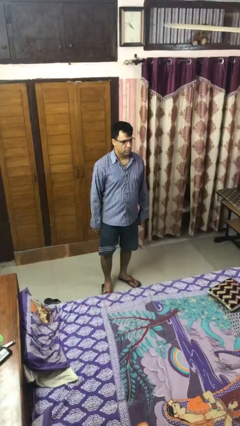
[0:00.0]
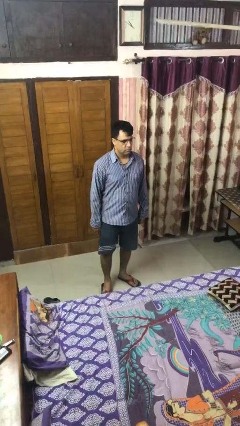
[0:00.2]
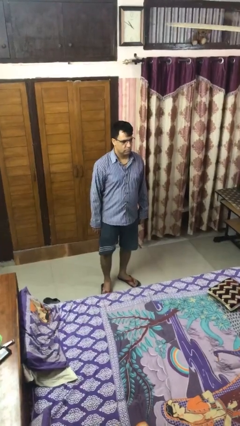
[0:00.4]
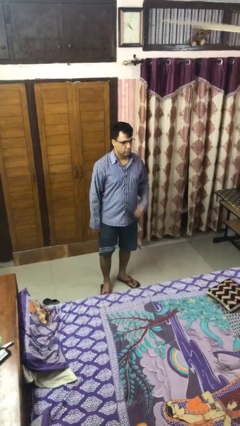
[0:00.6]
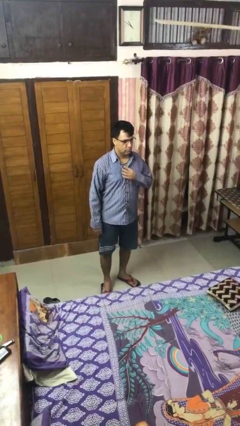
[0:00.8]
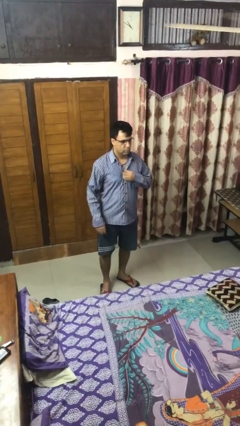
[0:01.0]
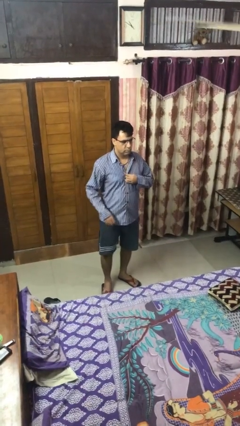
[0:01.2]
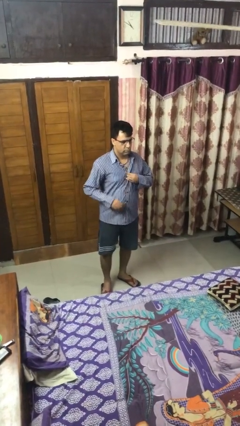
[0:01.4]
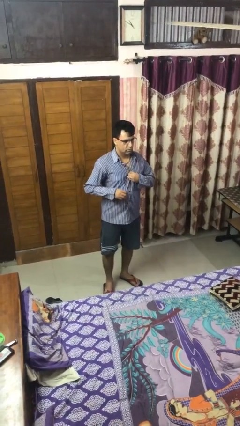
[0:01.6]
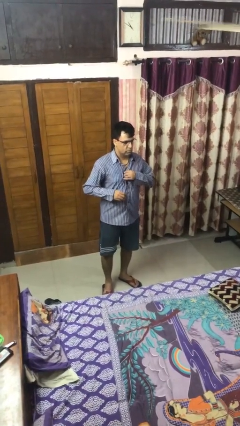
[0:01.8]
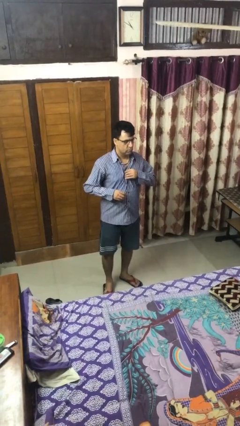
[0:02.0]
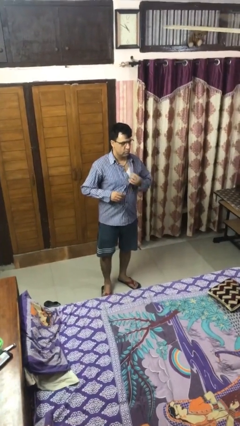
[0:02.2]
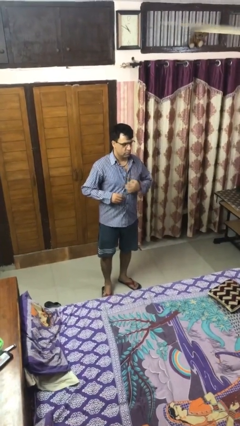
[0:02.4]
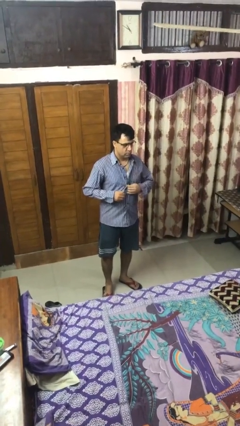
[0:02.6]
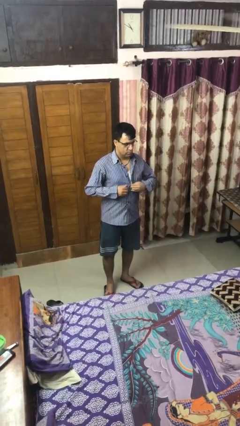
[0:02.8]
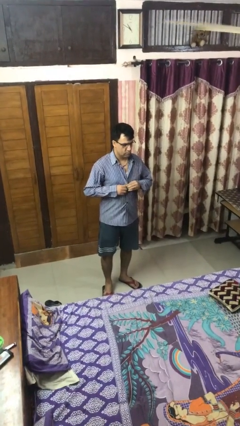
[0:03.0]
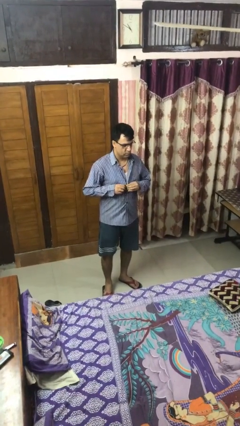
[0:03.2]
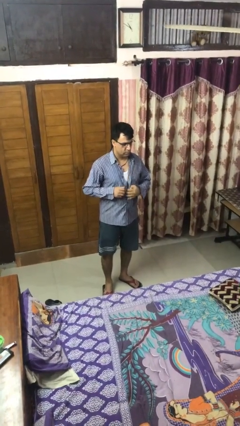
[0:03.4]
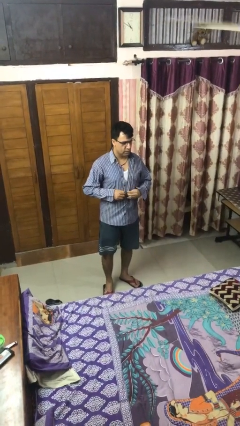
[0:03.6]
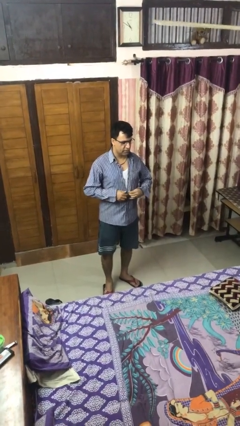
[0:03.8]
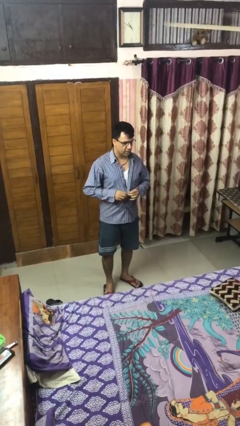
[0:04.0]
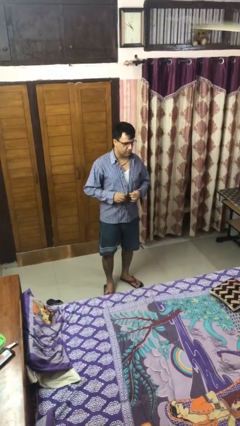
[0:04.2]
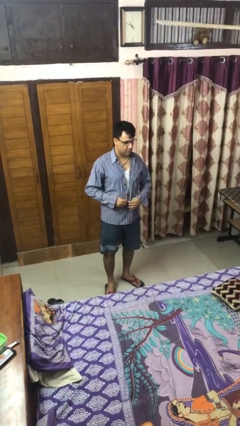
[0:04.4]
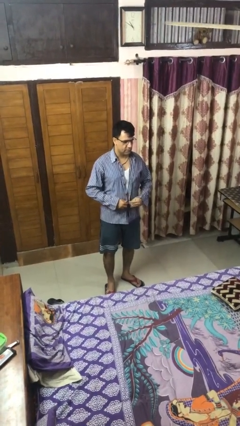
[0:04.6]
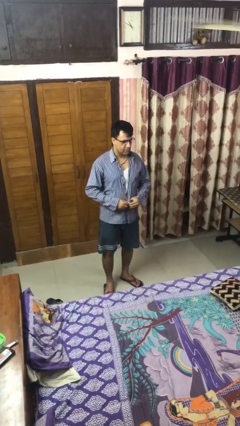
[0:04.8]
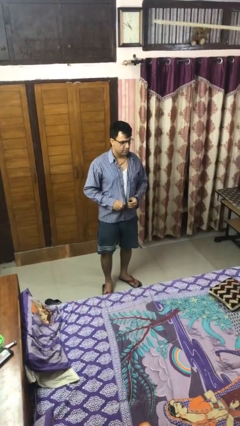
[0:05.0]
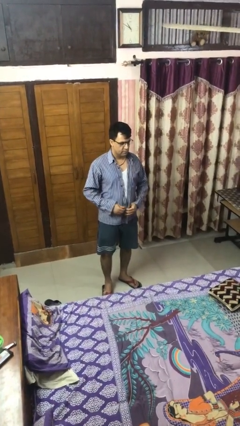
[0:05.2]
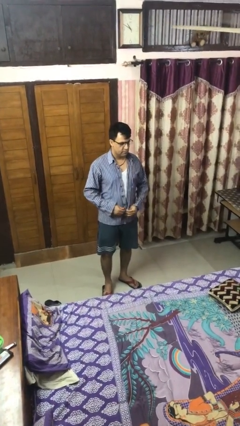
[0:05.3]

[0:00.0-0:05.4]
person unbuttons shirt

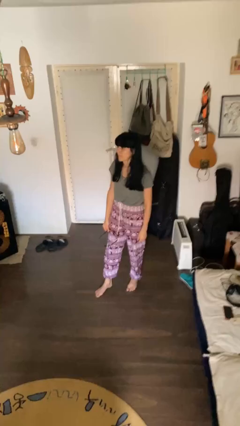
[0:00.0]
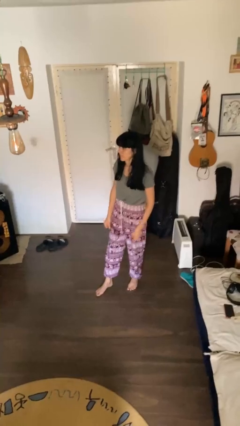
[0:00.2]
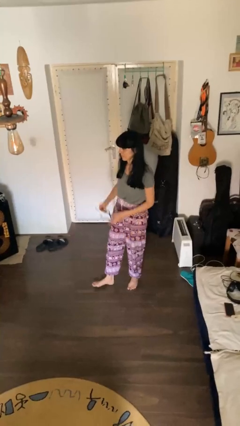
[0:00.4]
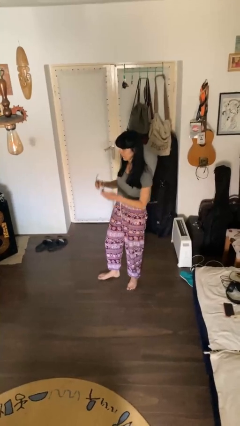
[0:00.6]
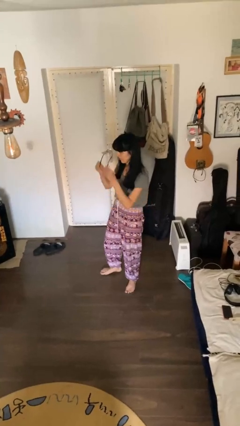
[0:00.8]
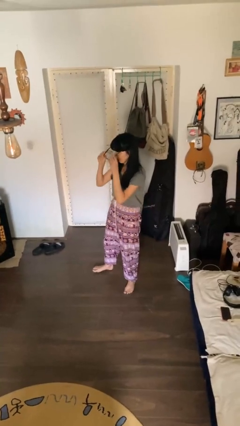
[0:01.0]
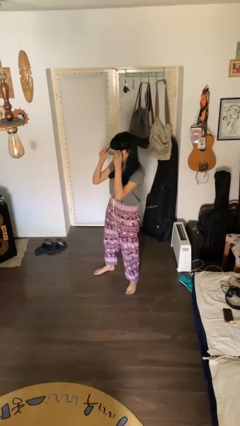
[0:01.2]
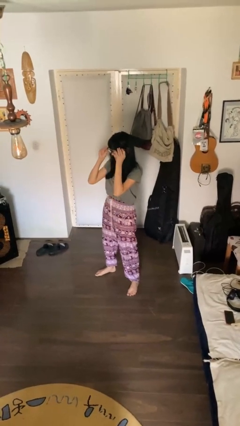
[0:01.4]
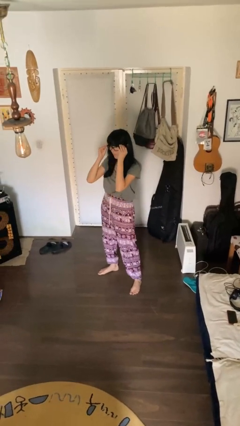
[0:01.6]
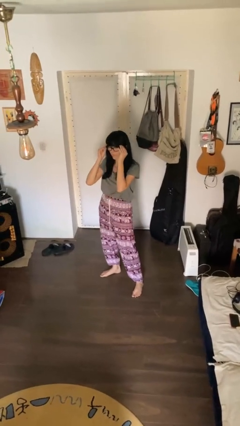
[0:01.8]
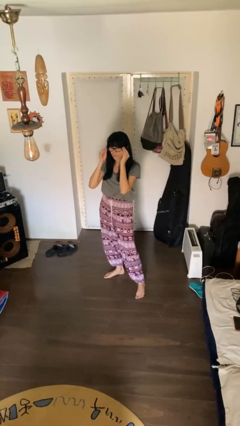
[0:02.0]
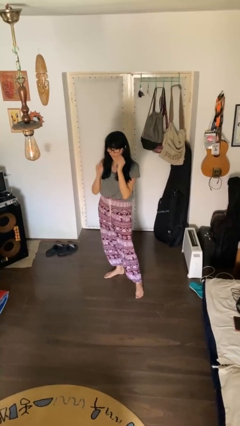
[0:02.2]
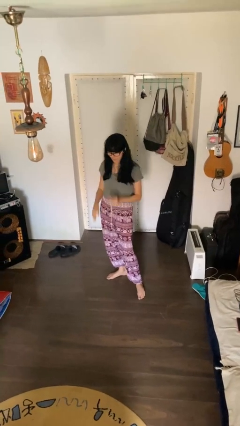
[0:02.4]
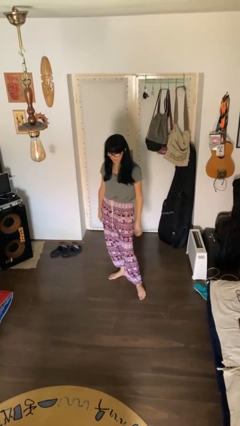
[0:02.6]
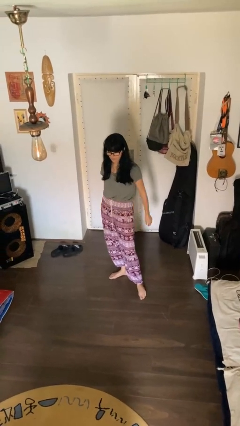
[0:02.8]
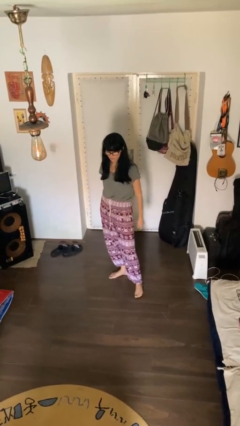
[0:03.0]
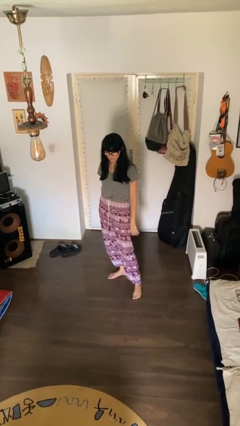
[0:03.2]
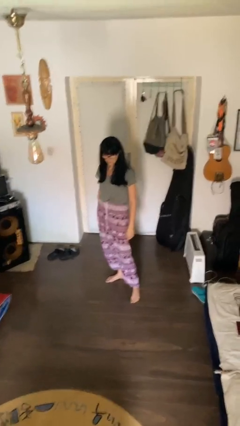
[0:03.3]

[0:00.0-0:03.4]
person puts on glasses

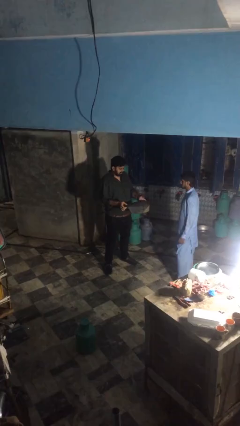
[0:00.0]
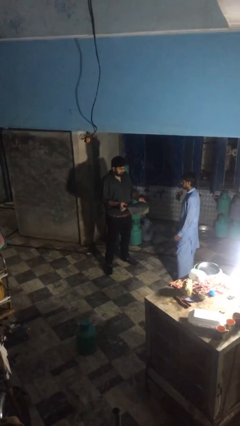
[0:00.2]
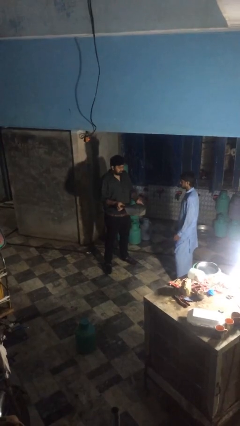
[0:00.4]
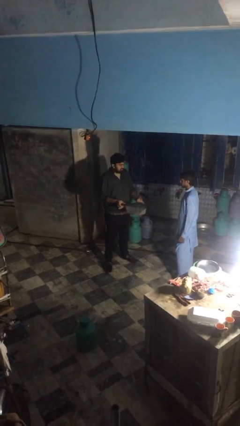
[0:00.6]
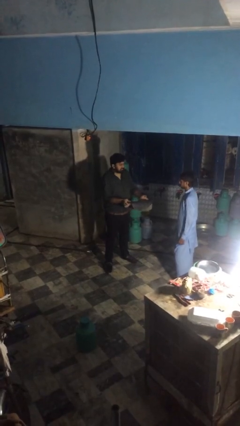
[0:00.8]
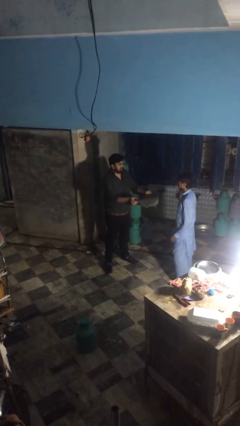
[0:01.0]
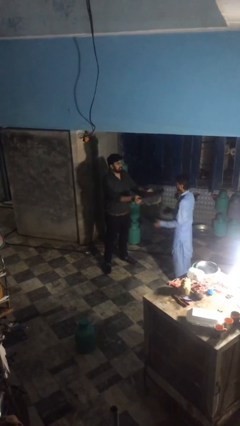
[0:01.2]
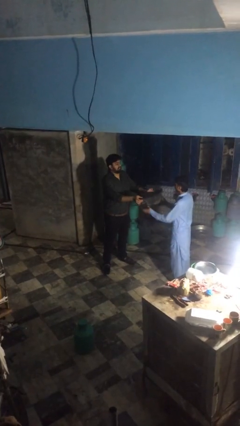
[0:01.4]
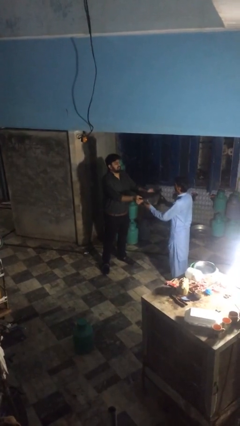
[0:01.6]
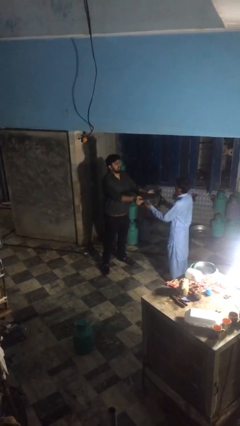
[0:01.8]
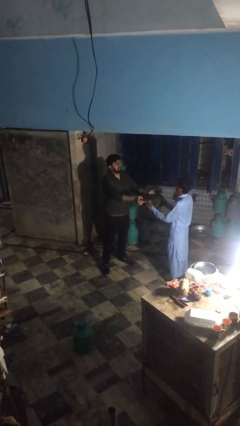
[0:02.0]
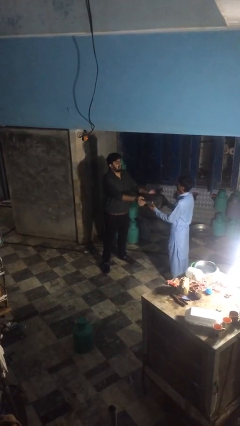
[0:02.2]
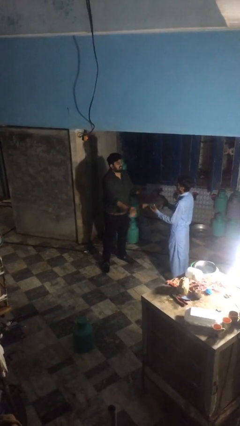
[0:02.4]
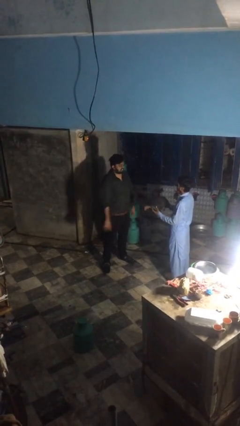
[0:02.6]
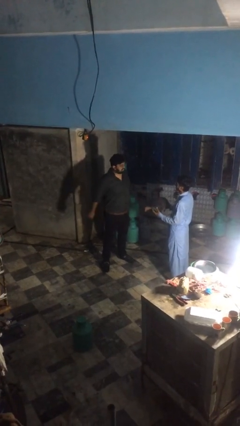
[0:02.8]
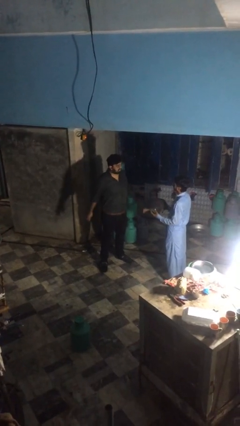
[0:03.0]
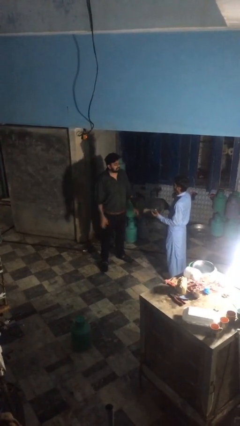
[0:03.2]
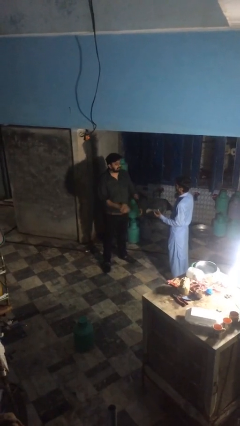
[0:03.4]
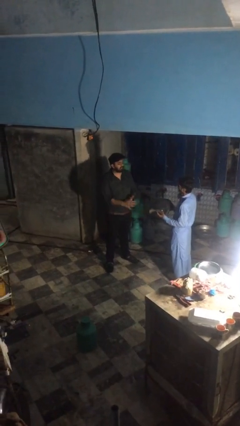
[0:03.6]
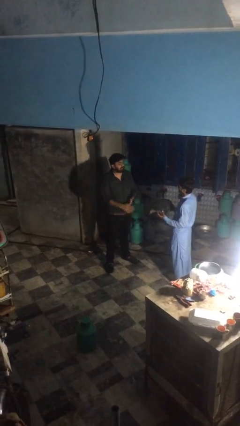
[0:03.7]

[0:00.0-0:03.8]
person transfers object to person

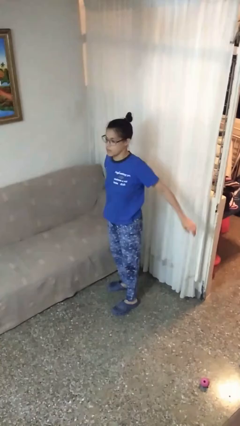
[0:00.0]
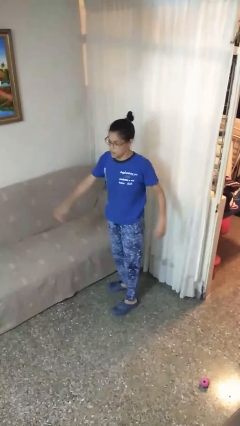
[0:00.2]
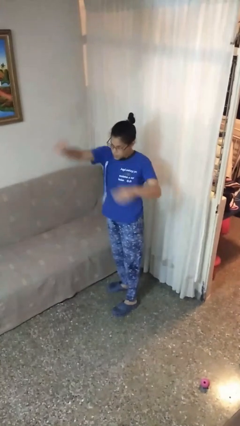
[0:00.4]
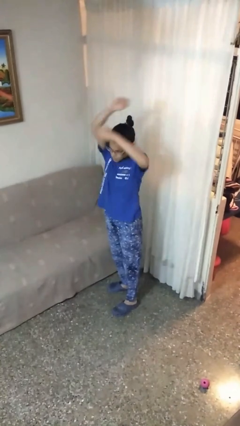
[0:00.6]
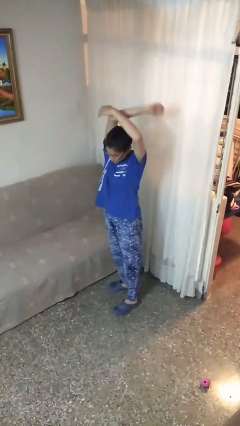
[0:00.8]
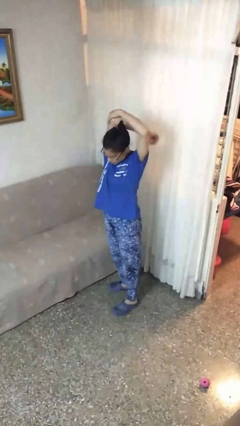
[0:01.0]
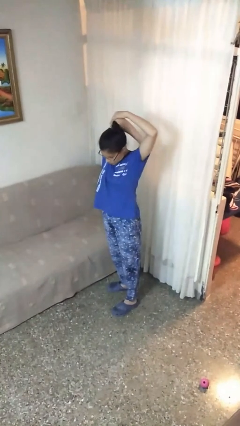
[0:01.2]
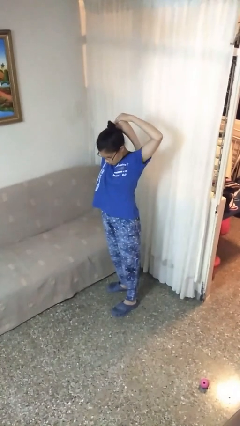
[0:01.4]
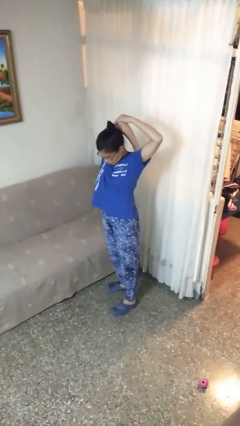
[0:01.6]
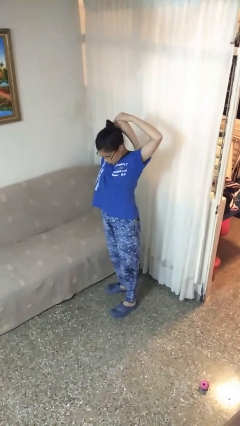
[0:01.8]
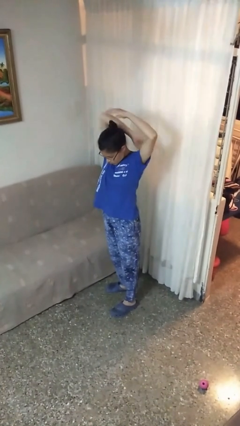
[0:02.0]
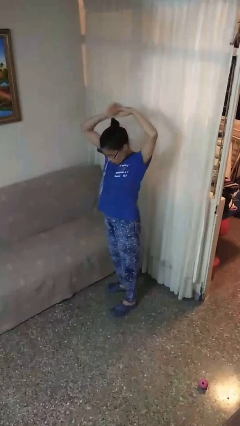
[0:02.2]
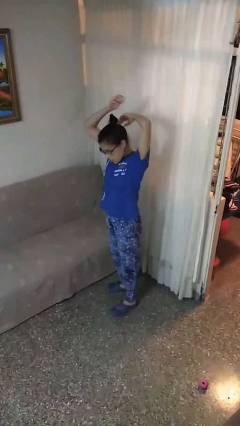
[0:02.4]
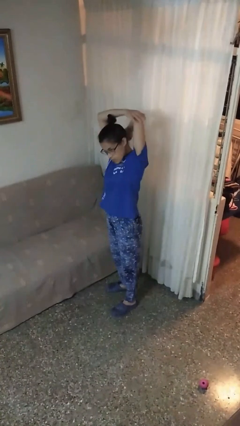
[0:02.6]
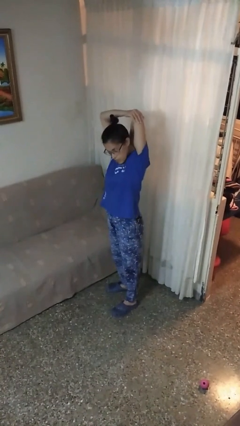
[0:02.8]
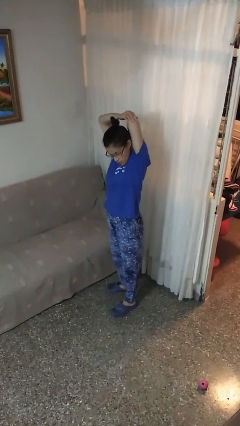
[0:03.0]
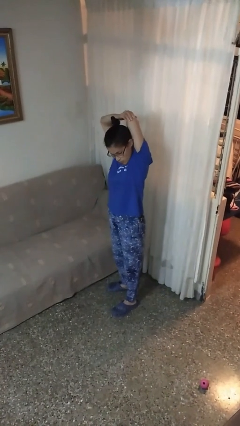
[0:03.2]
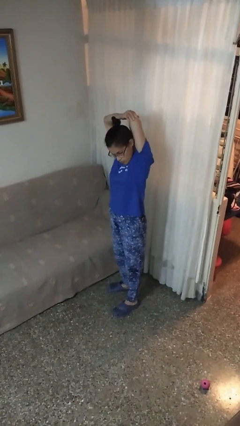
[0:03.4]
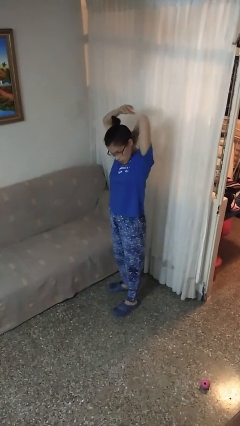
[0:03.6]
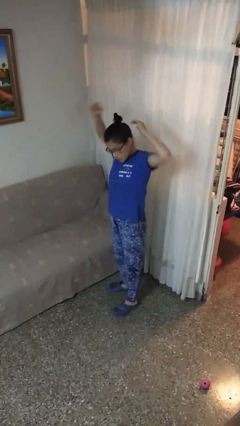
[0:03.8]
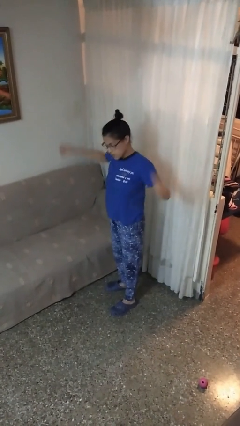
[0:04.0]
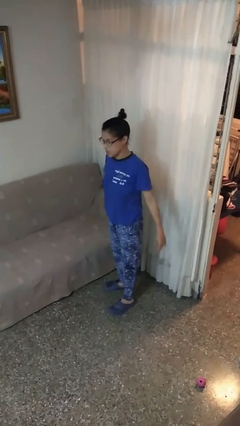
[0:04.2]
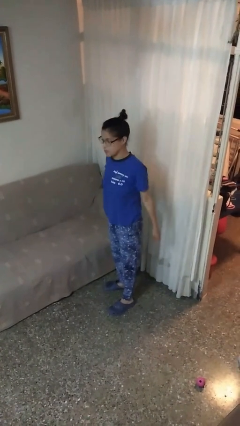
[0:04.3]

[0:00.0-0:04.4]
person stretches arms over head

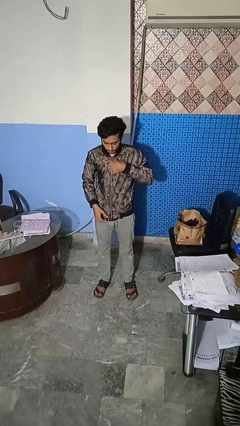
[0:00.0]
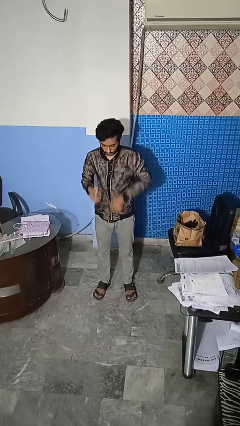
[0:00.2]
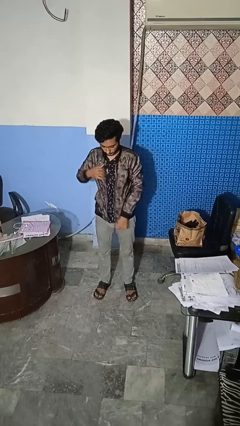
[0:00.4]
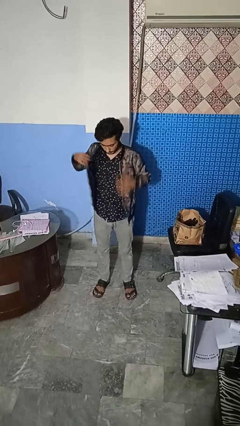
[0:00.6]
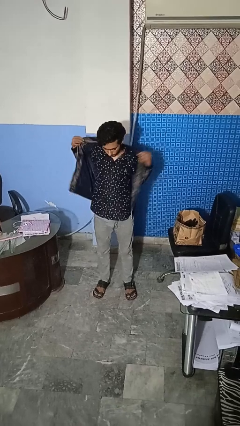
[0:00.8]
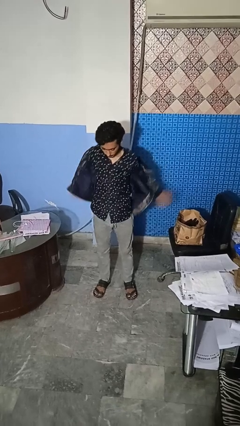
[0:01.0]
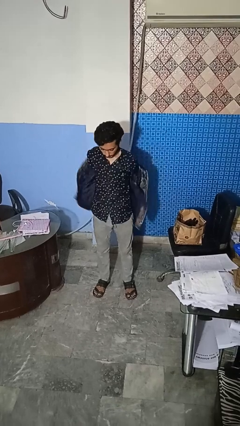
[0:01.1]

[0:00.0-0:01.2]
person unzips jacket
